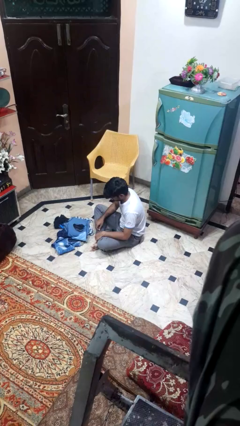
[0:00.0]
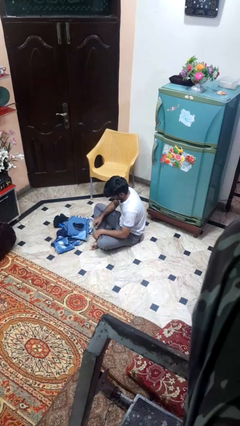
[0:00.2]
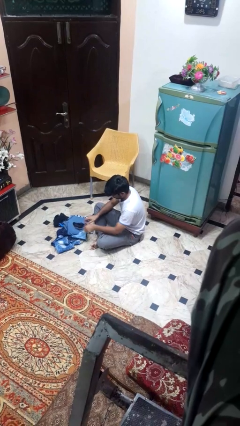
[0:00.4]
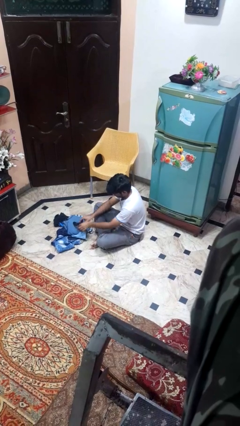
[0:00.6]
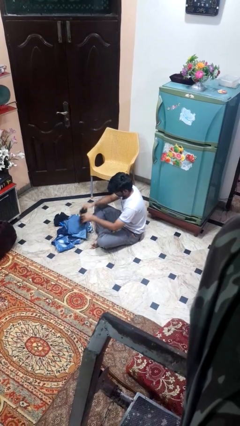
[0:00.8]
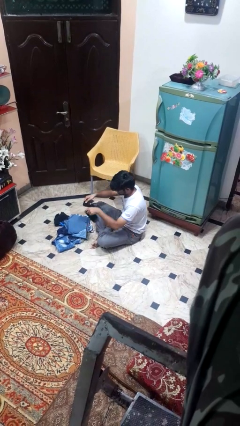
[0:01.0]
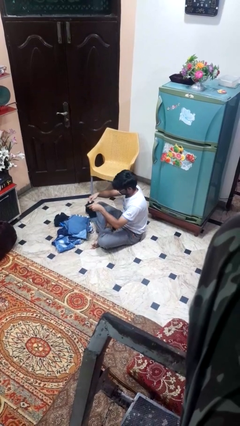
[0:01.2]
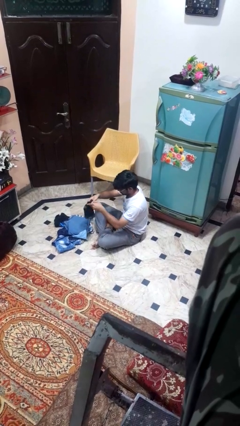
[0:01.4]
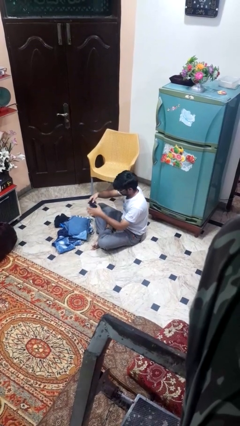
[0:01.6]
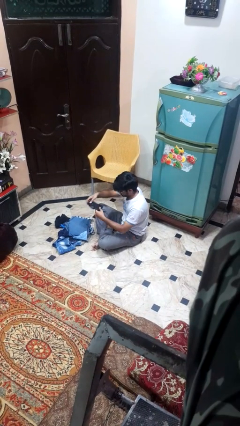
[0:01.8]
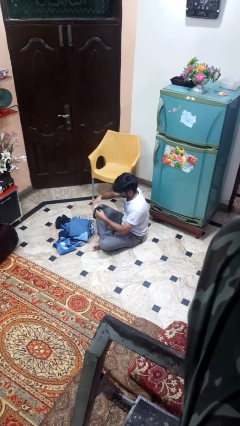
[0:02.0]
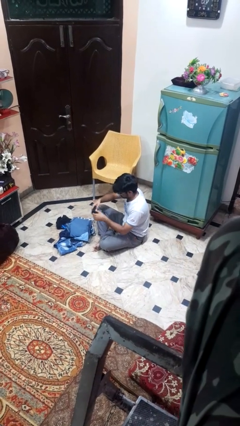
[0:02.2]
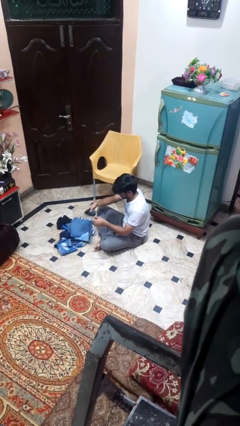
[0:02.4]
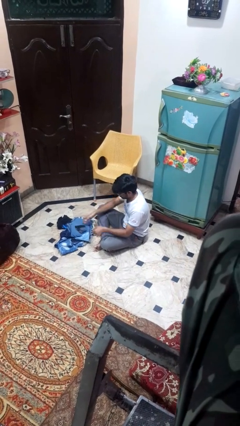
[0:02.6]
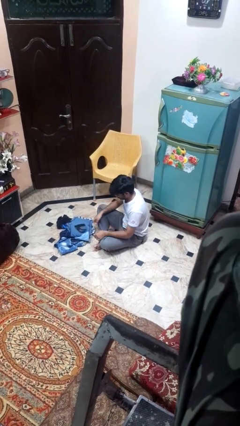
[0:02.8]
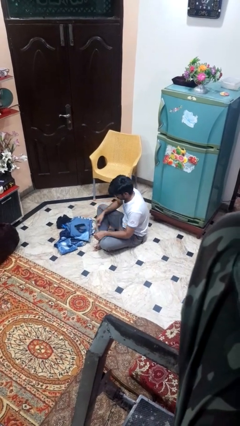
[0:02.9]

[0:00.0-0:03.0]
person folds socks

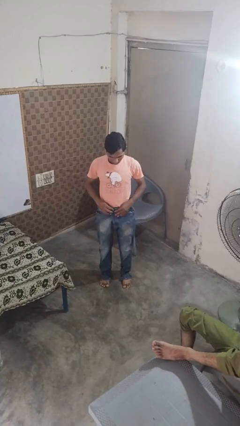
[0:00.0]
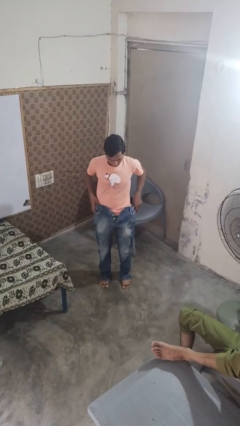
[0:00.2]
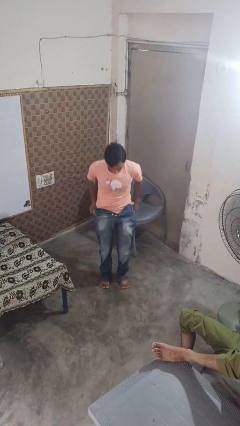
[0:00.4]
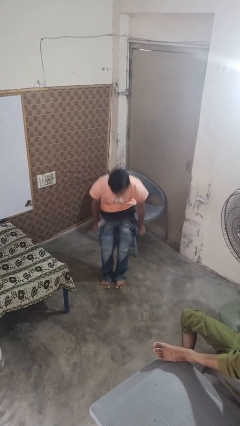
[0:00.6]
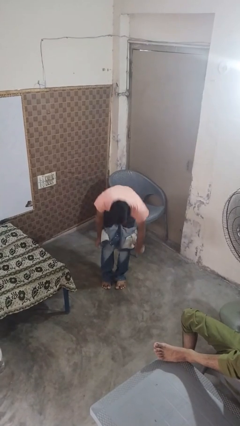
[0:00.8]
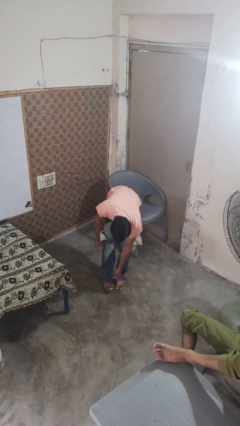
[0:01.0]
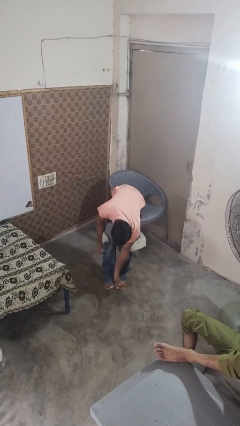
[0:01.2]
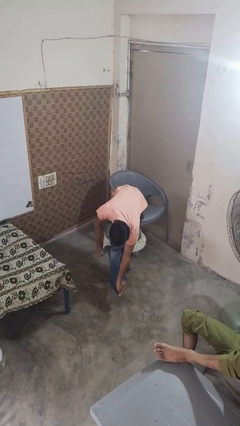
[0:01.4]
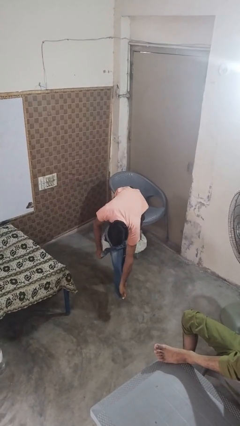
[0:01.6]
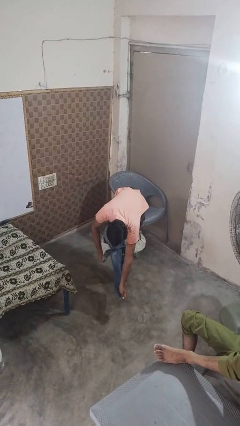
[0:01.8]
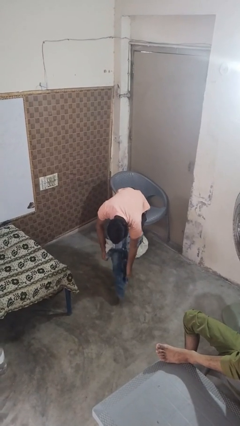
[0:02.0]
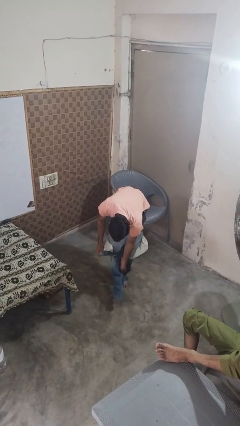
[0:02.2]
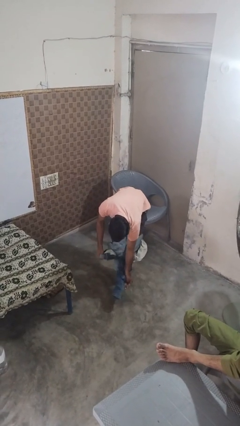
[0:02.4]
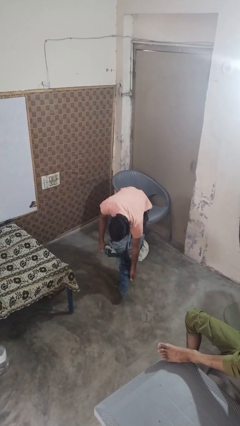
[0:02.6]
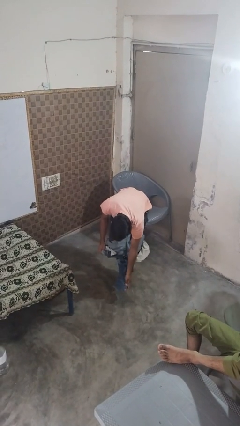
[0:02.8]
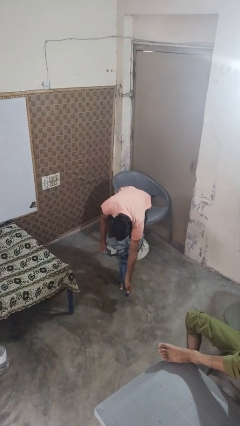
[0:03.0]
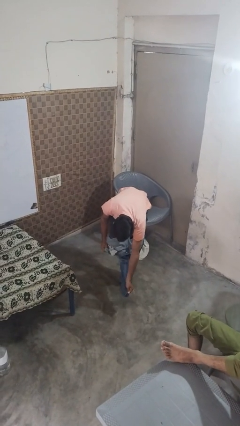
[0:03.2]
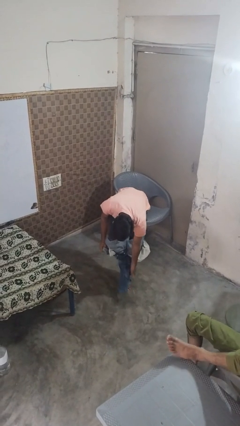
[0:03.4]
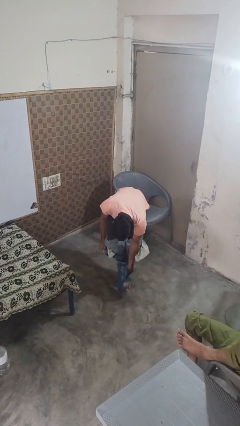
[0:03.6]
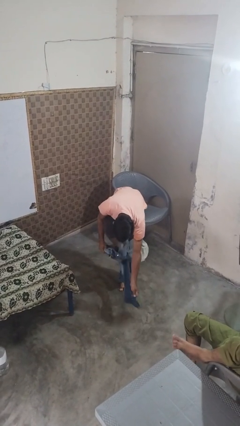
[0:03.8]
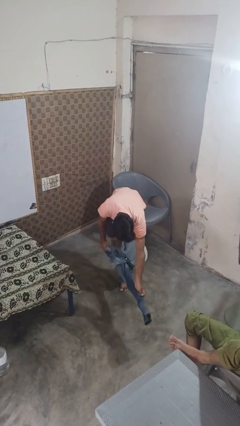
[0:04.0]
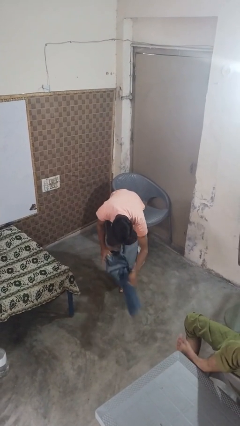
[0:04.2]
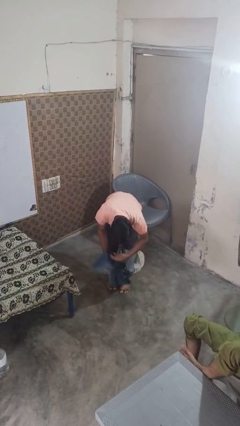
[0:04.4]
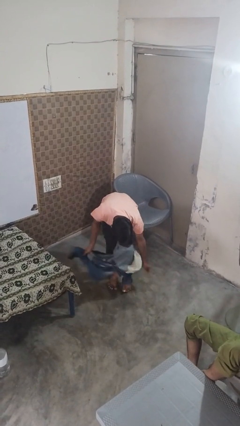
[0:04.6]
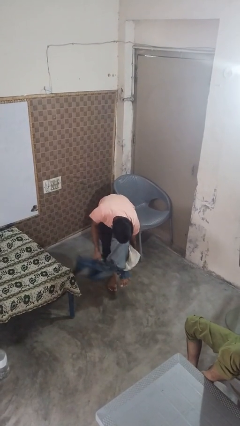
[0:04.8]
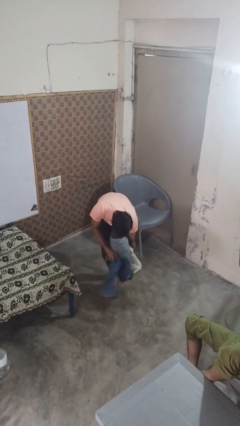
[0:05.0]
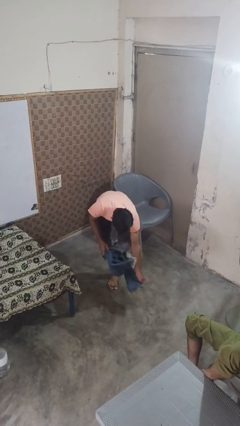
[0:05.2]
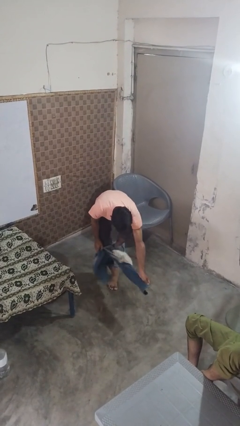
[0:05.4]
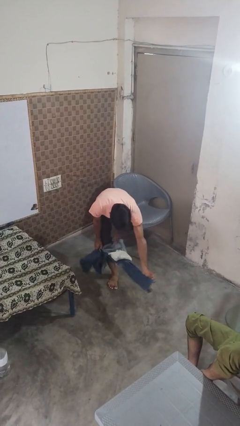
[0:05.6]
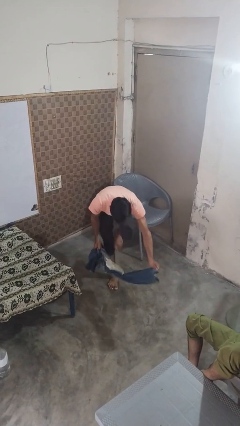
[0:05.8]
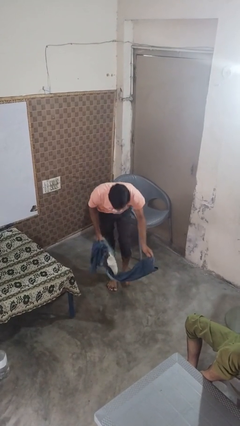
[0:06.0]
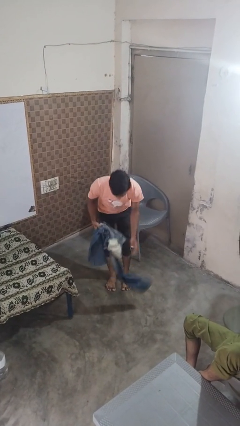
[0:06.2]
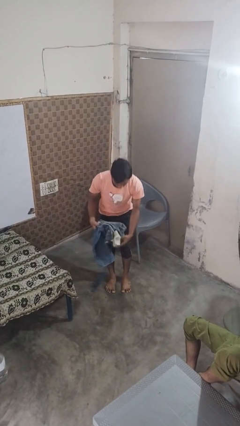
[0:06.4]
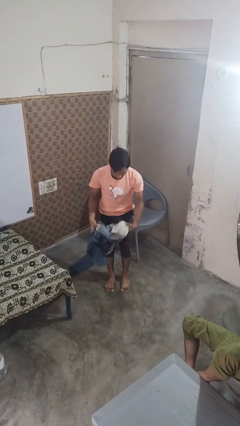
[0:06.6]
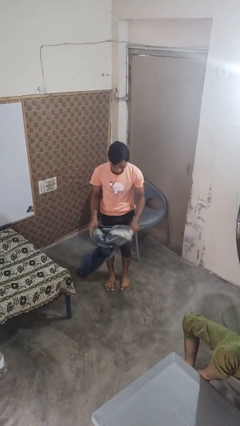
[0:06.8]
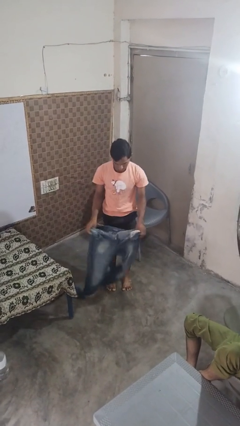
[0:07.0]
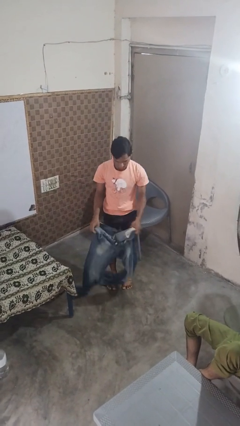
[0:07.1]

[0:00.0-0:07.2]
person takes off pants

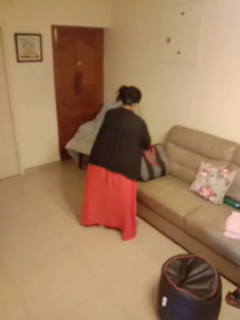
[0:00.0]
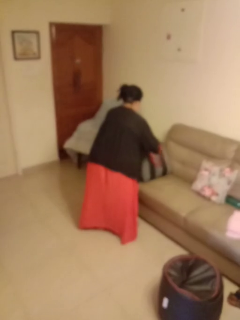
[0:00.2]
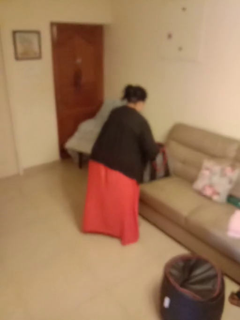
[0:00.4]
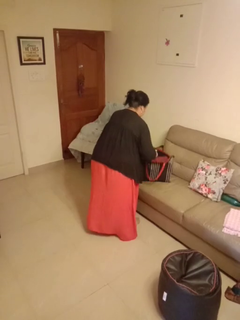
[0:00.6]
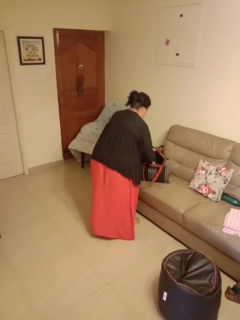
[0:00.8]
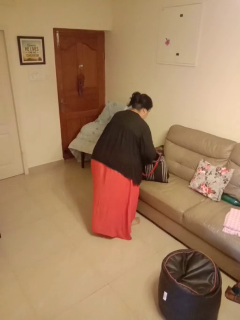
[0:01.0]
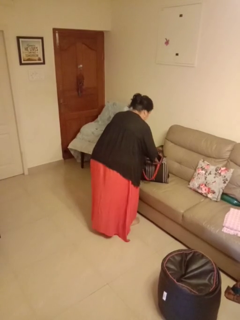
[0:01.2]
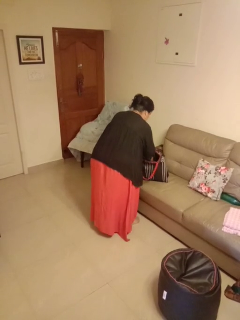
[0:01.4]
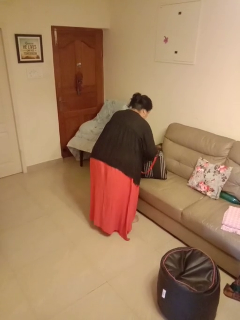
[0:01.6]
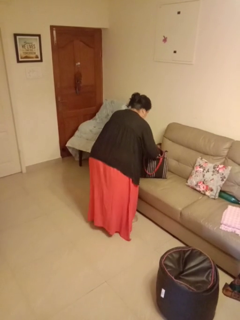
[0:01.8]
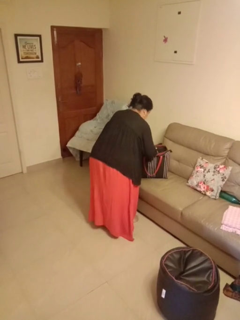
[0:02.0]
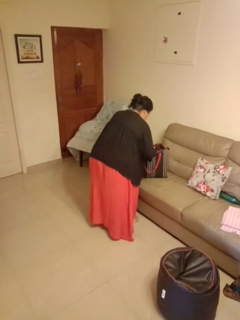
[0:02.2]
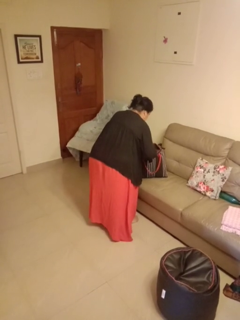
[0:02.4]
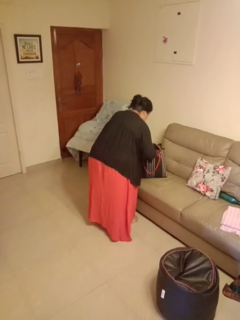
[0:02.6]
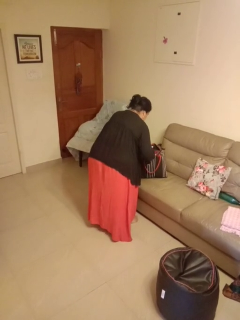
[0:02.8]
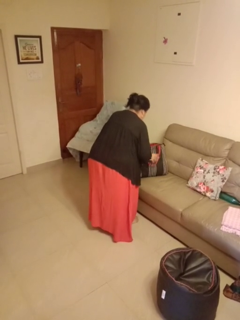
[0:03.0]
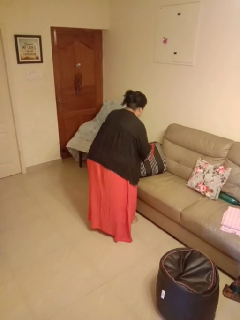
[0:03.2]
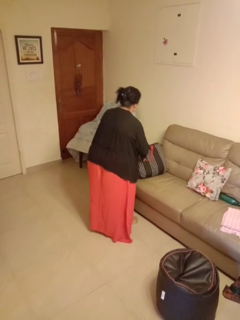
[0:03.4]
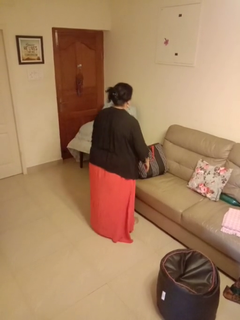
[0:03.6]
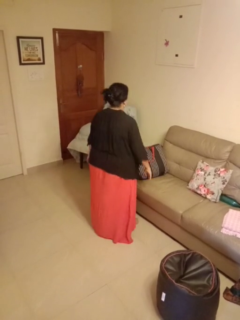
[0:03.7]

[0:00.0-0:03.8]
person searches in bag

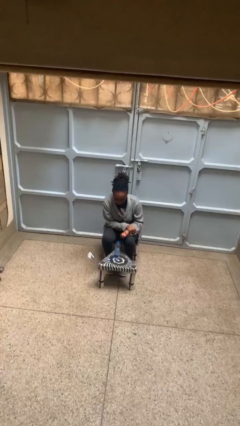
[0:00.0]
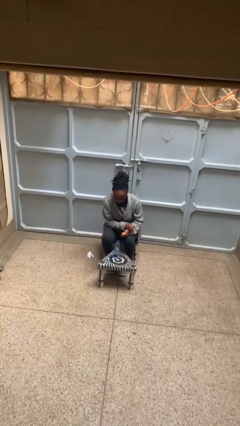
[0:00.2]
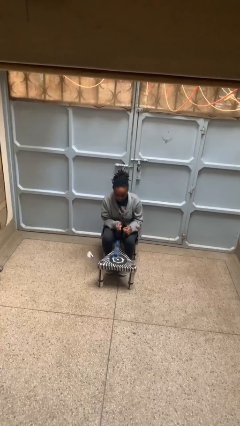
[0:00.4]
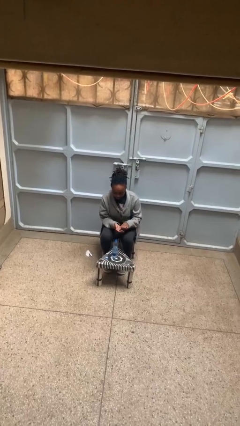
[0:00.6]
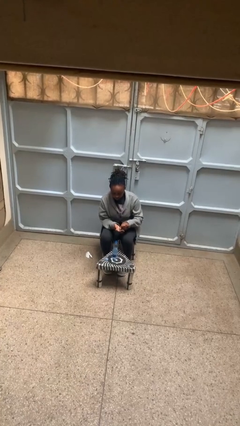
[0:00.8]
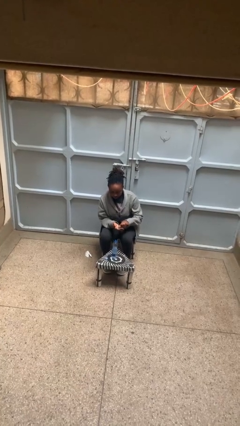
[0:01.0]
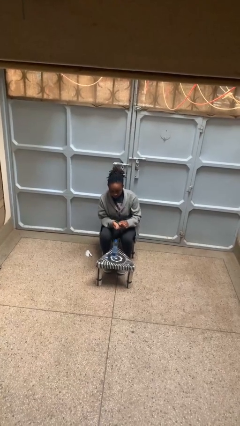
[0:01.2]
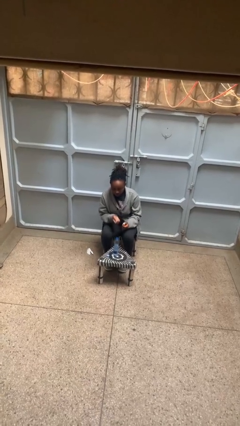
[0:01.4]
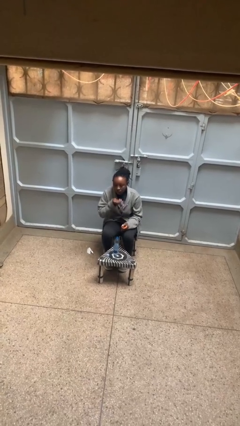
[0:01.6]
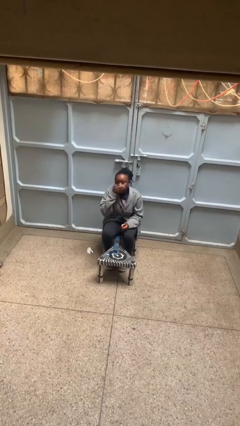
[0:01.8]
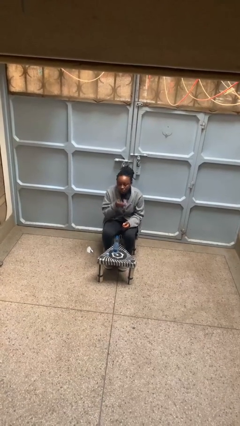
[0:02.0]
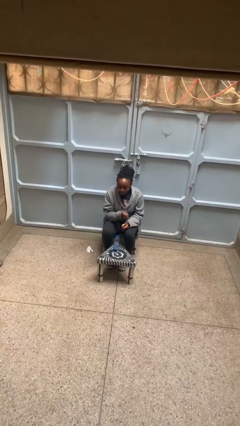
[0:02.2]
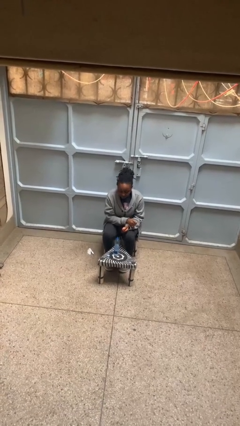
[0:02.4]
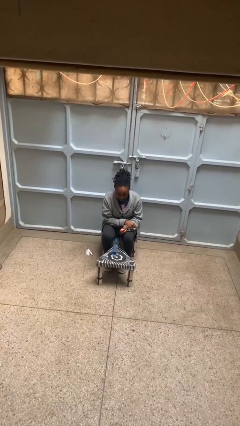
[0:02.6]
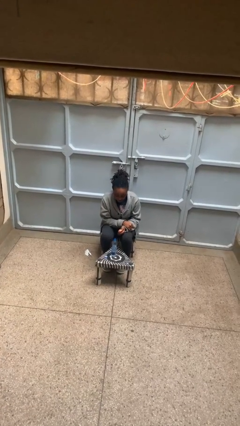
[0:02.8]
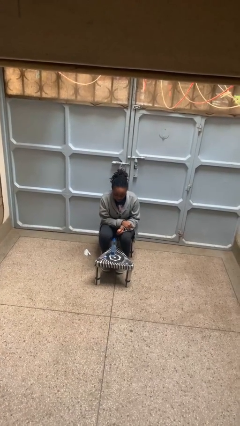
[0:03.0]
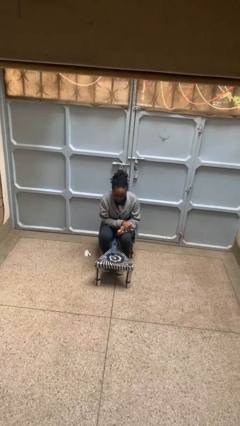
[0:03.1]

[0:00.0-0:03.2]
person takes medicine pills

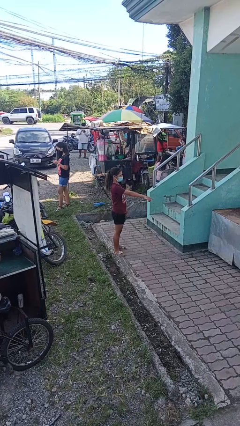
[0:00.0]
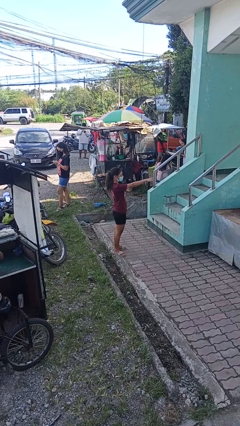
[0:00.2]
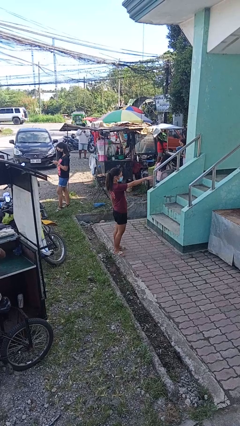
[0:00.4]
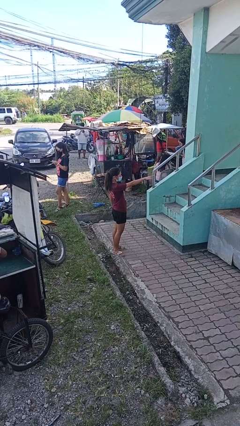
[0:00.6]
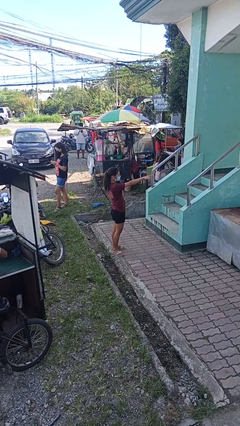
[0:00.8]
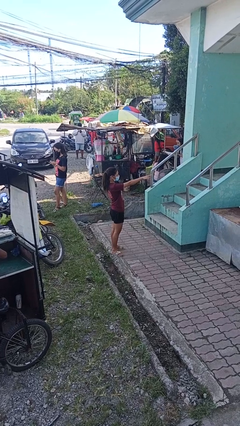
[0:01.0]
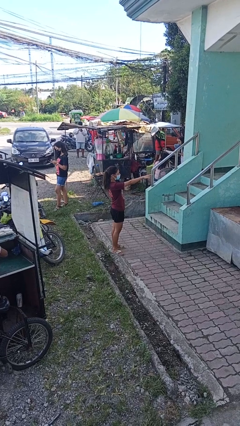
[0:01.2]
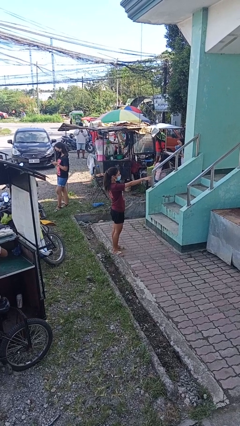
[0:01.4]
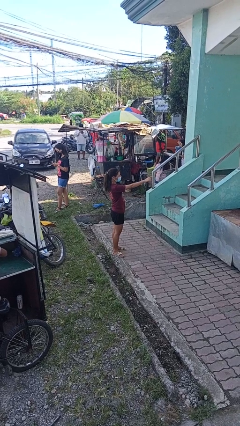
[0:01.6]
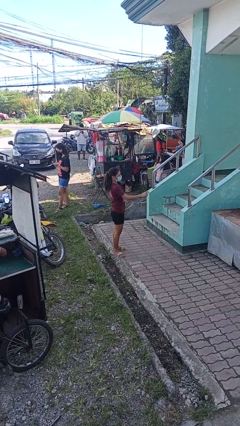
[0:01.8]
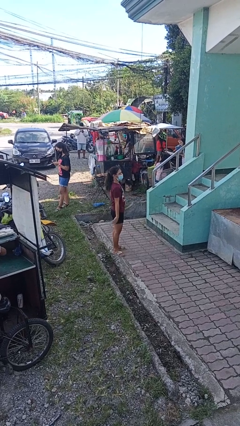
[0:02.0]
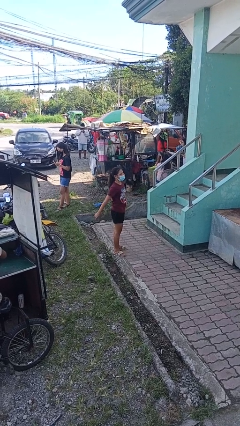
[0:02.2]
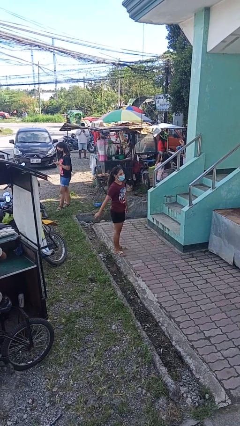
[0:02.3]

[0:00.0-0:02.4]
person points at person
